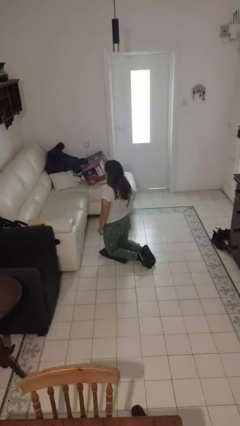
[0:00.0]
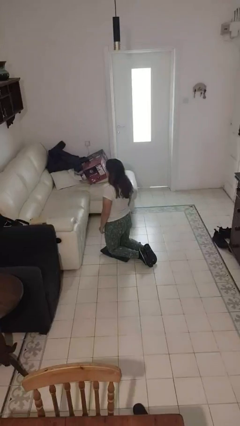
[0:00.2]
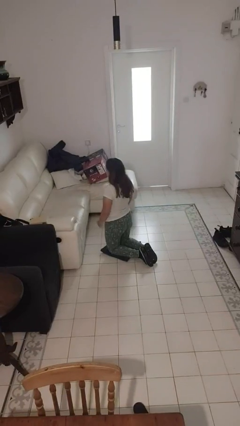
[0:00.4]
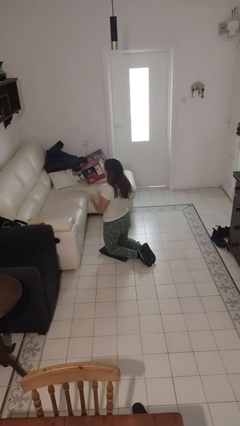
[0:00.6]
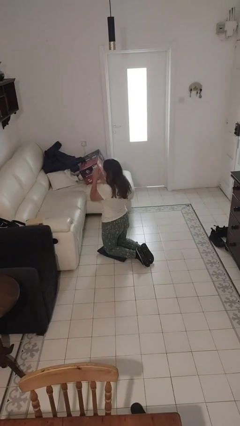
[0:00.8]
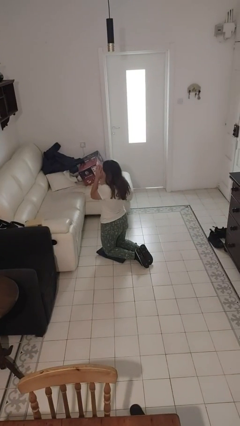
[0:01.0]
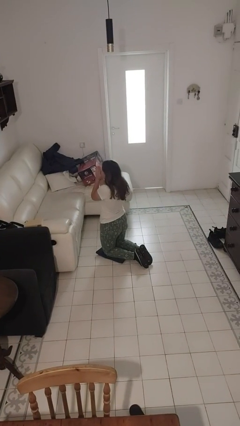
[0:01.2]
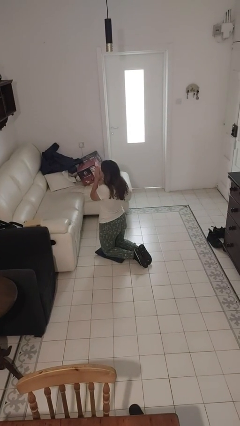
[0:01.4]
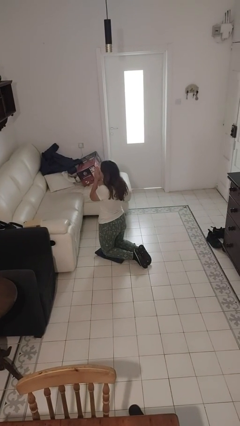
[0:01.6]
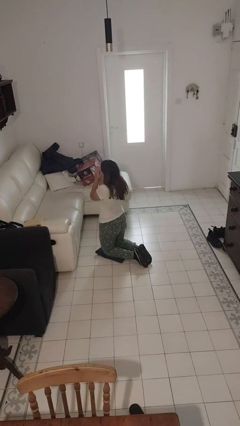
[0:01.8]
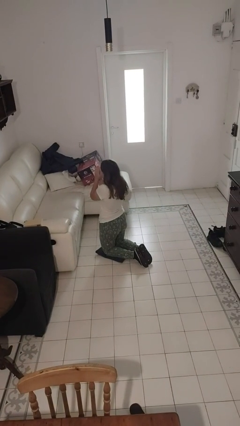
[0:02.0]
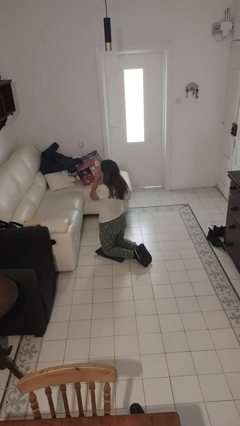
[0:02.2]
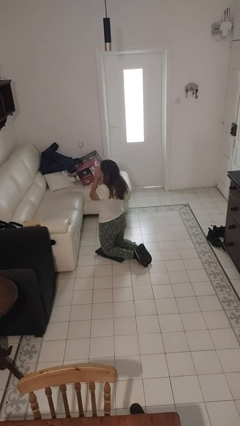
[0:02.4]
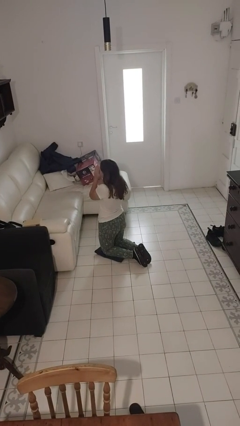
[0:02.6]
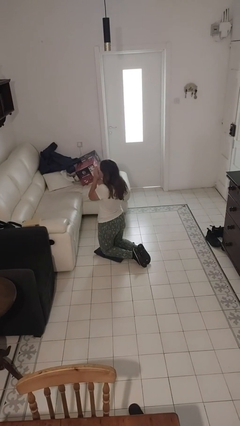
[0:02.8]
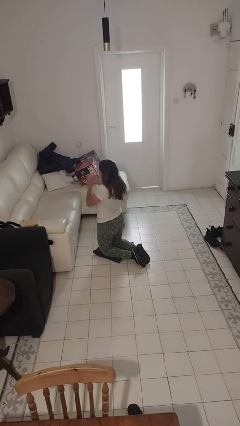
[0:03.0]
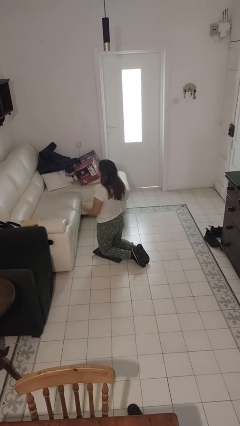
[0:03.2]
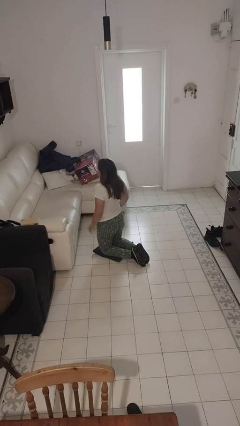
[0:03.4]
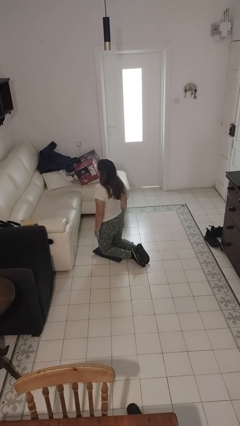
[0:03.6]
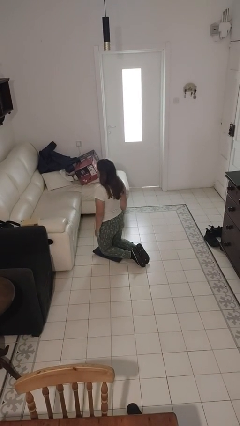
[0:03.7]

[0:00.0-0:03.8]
person prays

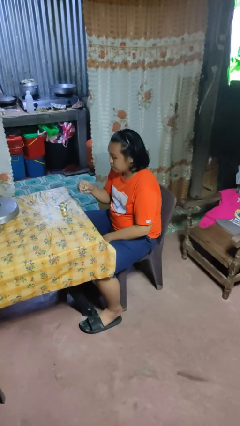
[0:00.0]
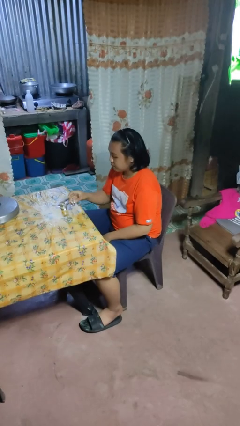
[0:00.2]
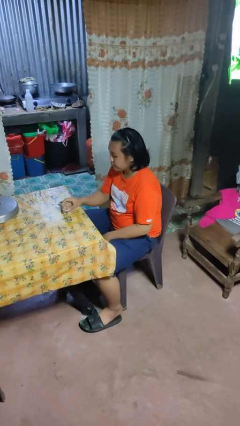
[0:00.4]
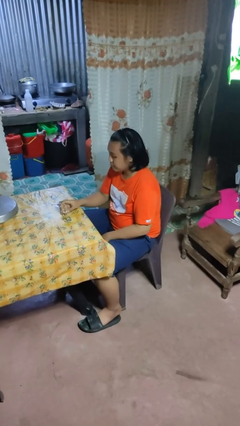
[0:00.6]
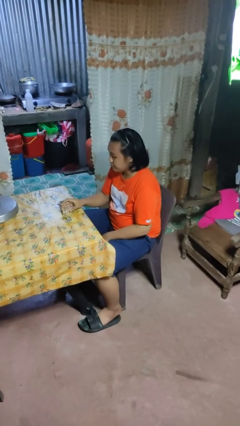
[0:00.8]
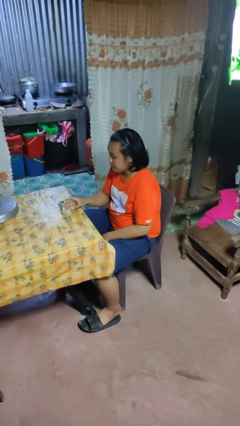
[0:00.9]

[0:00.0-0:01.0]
person puts down object on table

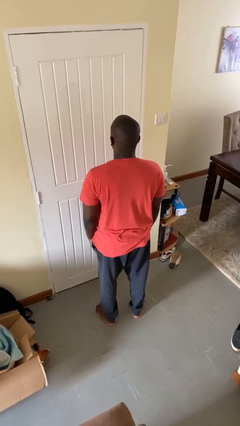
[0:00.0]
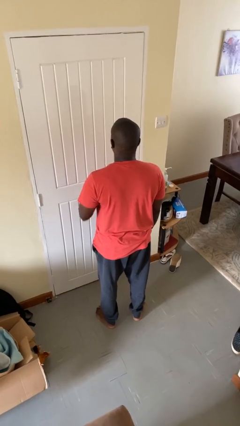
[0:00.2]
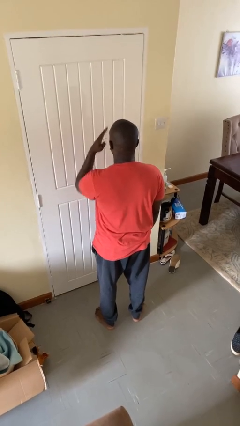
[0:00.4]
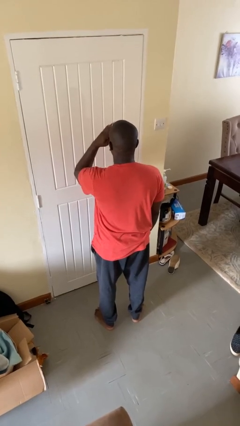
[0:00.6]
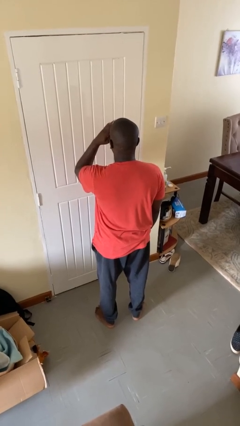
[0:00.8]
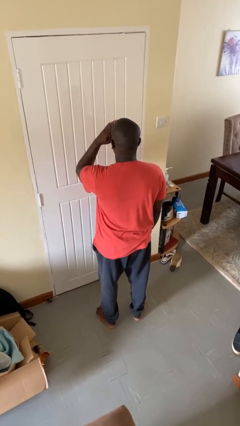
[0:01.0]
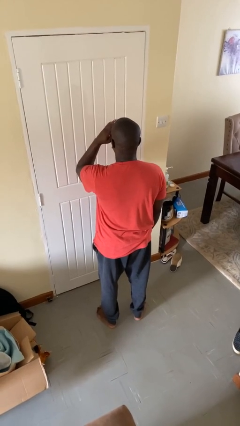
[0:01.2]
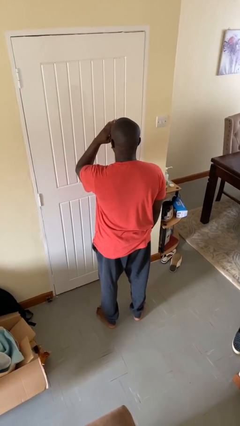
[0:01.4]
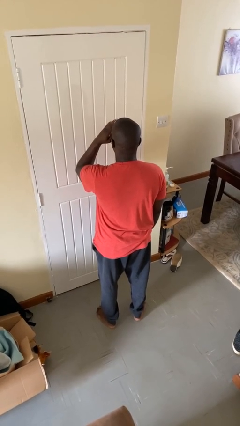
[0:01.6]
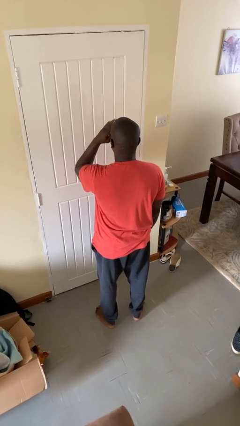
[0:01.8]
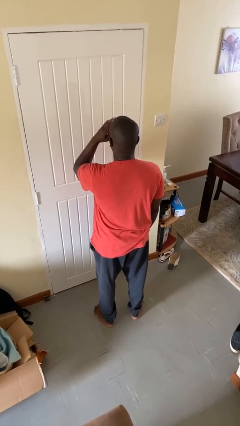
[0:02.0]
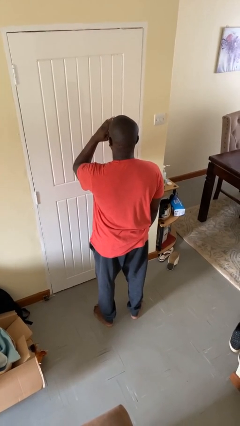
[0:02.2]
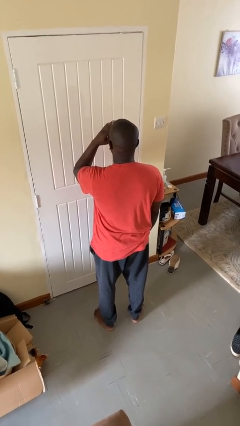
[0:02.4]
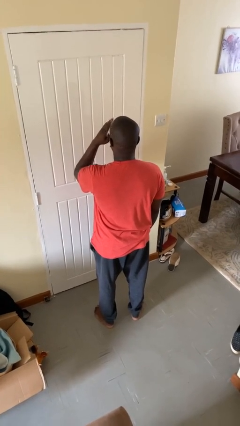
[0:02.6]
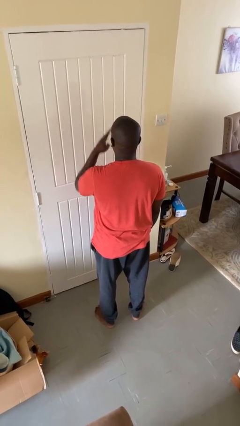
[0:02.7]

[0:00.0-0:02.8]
person salutes

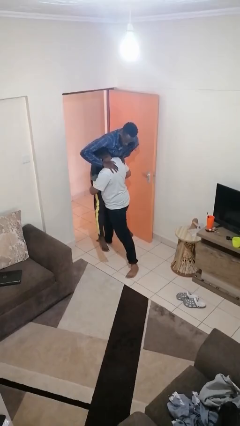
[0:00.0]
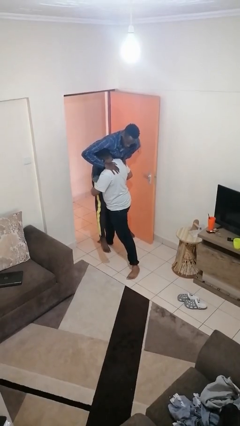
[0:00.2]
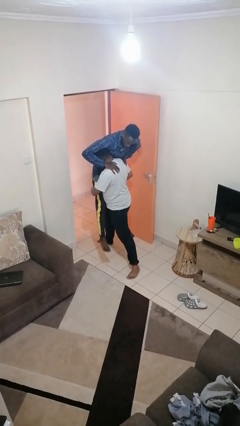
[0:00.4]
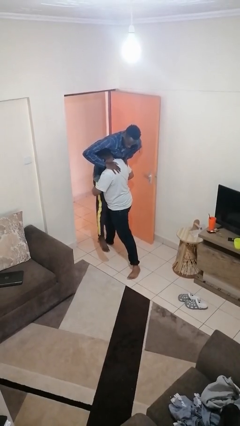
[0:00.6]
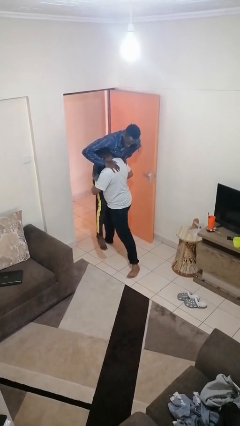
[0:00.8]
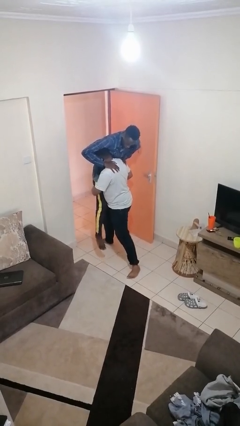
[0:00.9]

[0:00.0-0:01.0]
person picks up person

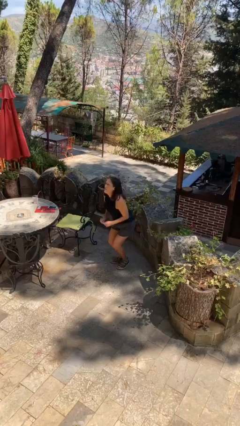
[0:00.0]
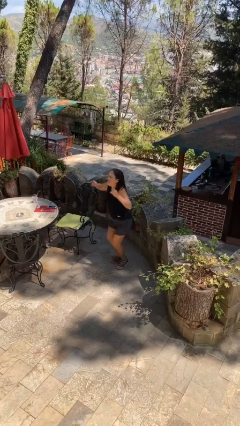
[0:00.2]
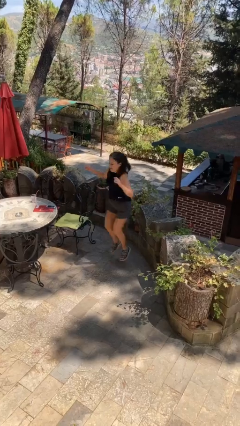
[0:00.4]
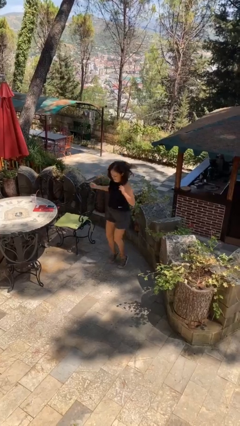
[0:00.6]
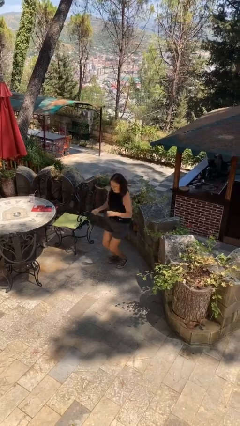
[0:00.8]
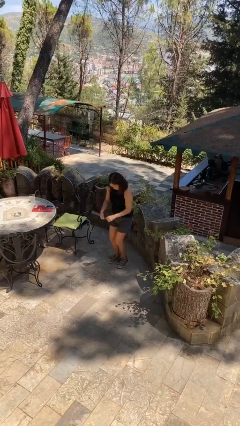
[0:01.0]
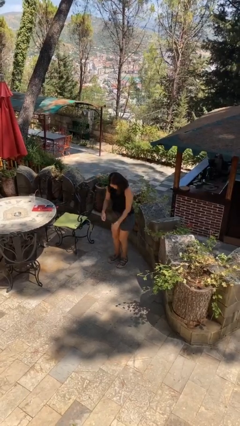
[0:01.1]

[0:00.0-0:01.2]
person jumps

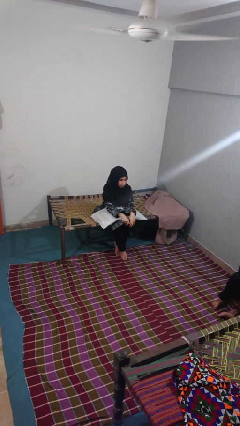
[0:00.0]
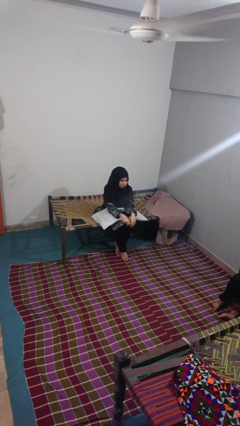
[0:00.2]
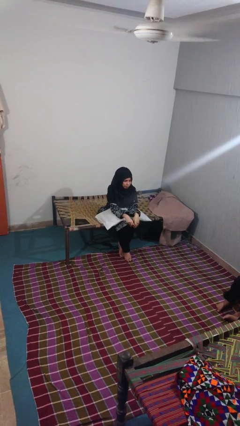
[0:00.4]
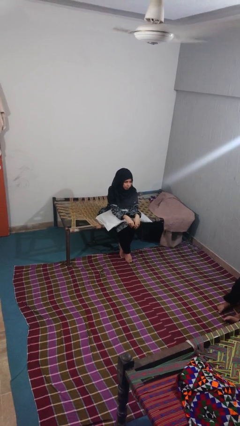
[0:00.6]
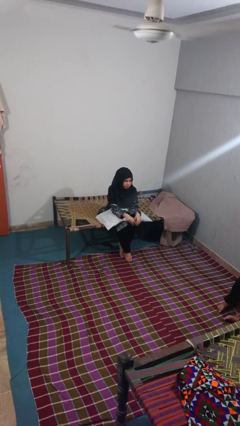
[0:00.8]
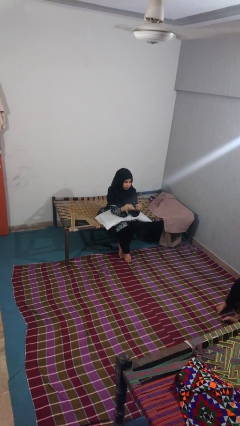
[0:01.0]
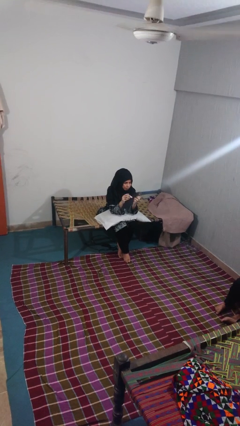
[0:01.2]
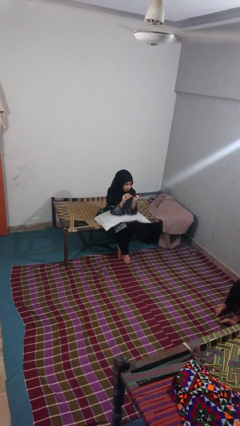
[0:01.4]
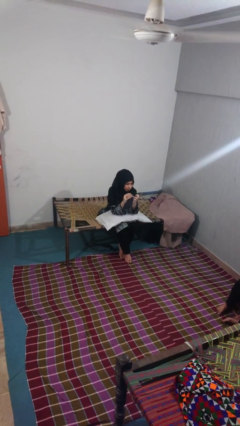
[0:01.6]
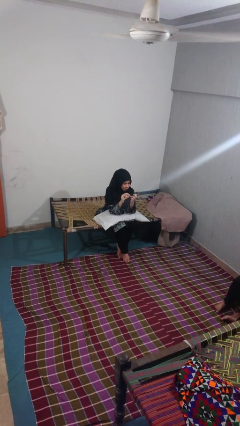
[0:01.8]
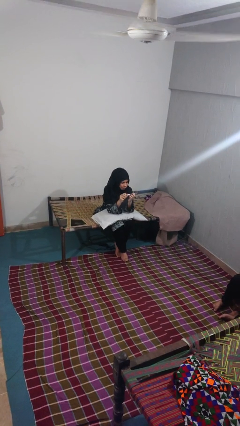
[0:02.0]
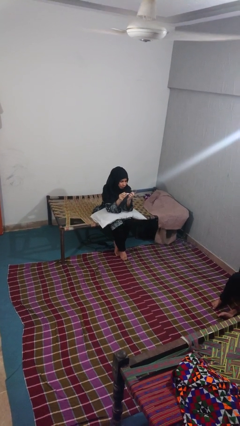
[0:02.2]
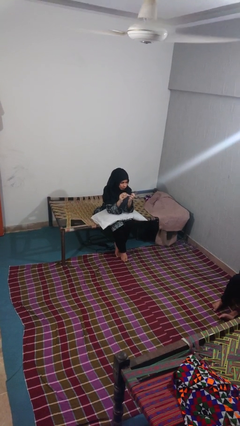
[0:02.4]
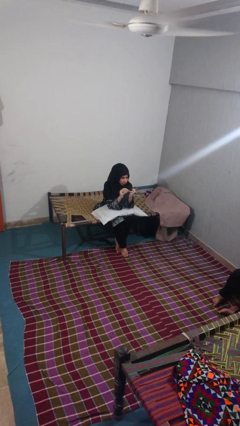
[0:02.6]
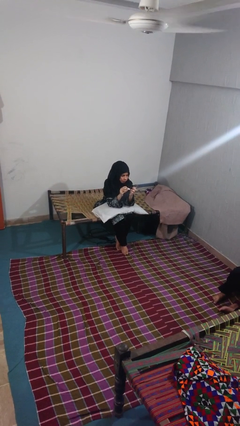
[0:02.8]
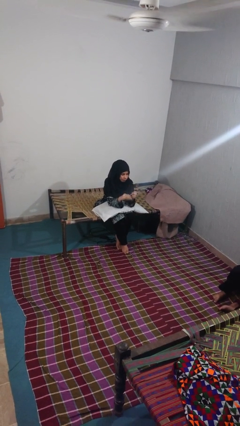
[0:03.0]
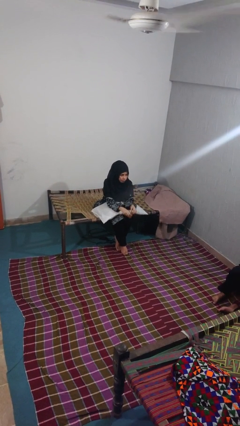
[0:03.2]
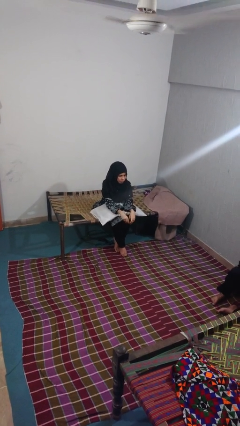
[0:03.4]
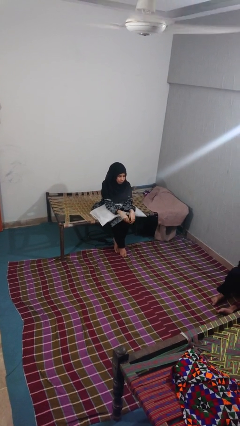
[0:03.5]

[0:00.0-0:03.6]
person clips fingernails

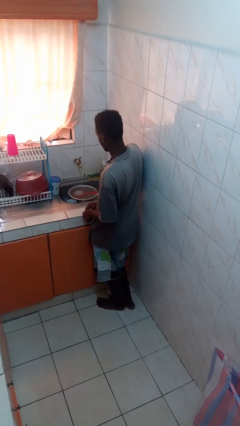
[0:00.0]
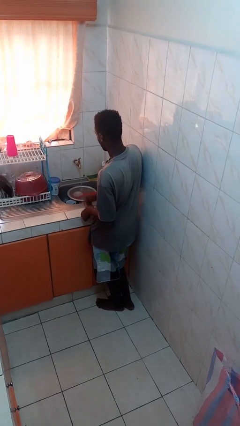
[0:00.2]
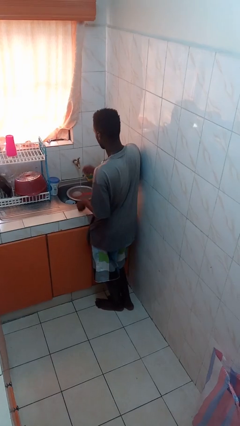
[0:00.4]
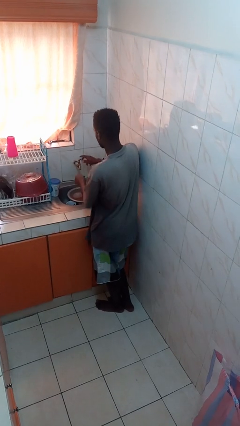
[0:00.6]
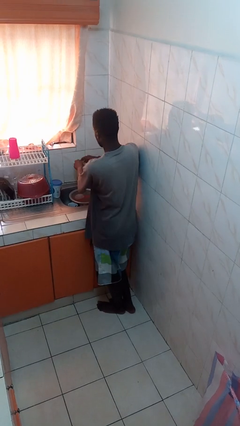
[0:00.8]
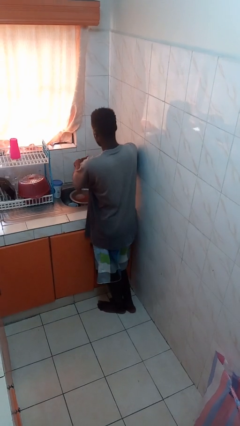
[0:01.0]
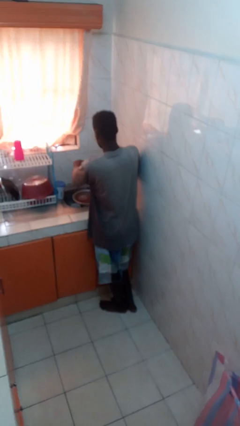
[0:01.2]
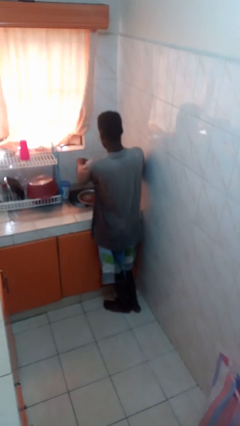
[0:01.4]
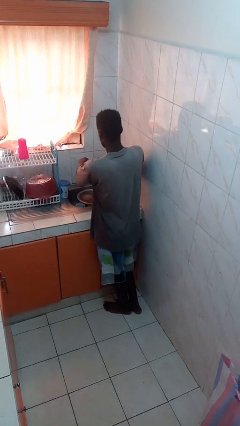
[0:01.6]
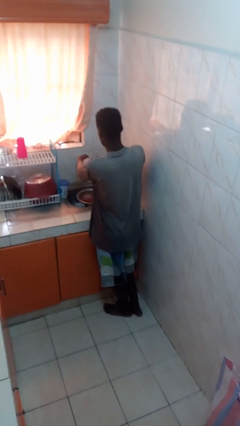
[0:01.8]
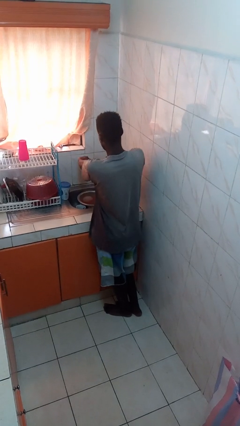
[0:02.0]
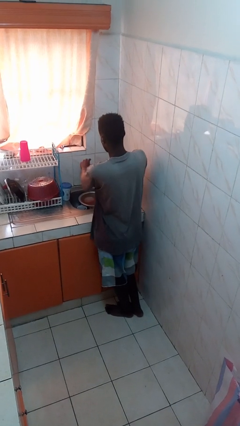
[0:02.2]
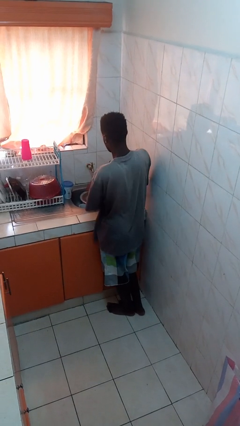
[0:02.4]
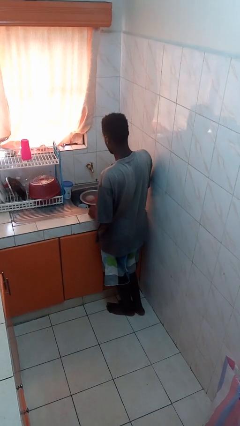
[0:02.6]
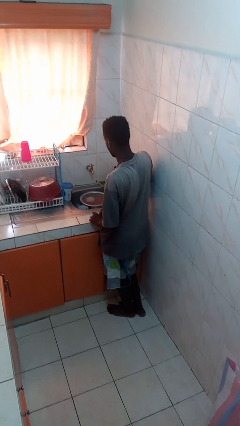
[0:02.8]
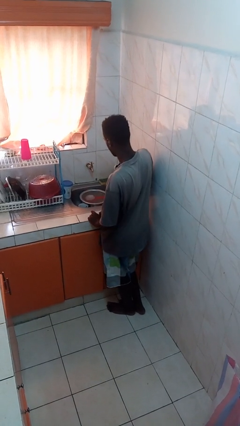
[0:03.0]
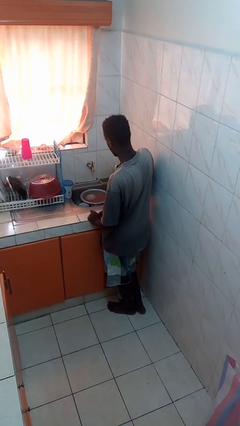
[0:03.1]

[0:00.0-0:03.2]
person turns off faucet

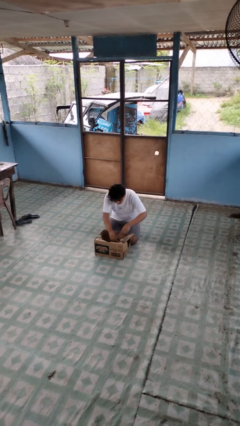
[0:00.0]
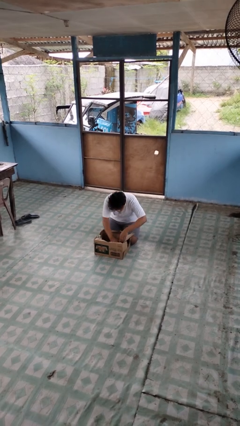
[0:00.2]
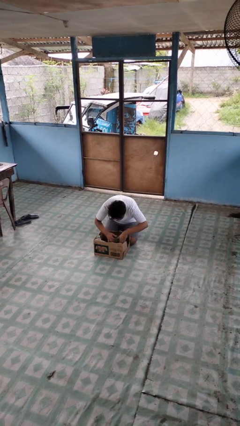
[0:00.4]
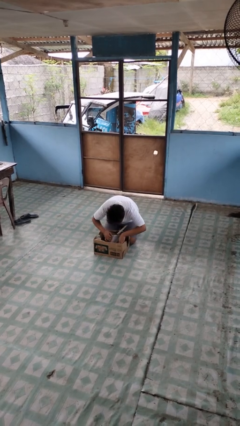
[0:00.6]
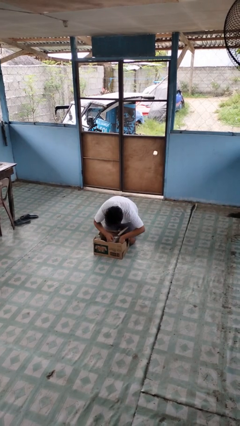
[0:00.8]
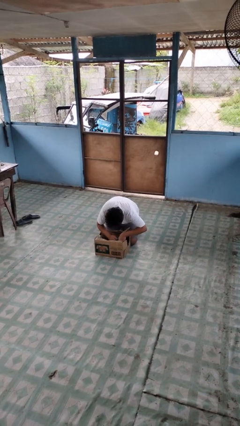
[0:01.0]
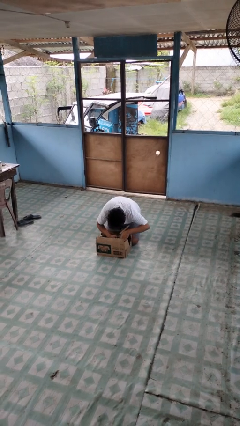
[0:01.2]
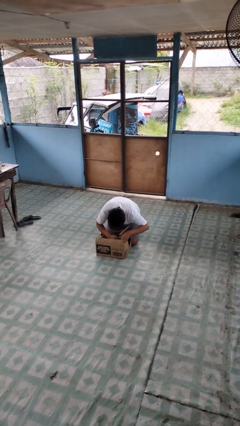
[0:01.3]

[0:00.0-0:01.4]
person searches in box
